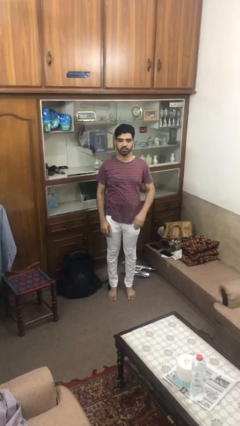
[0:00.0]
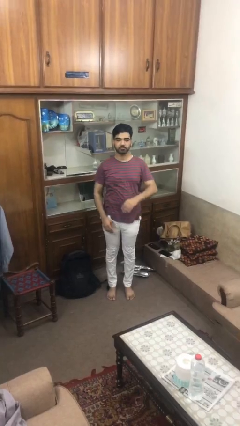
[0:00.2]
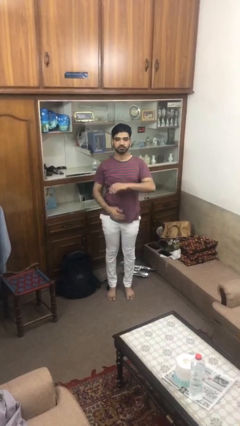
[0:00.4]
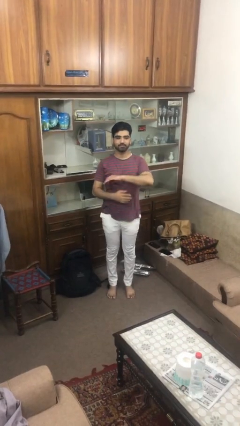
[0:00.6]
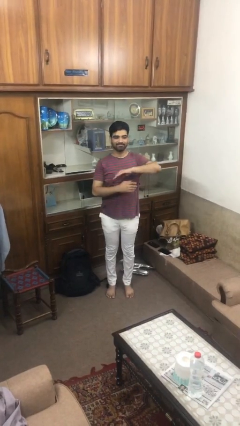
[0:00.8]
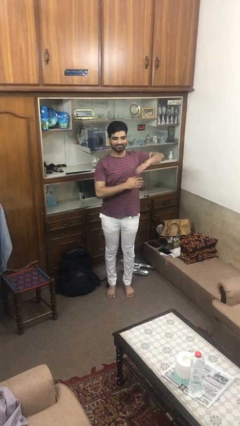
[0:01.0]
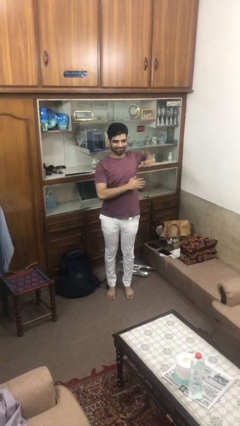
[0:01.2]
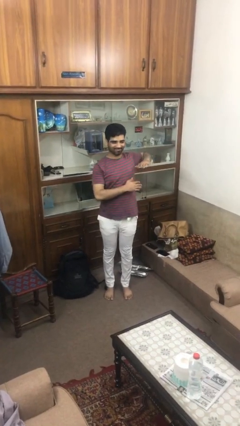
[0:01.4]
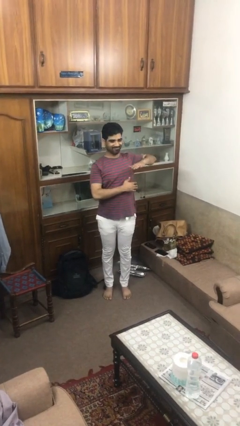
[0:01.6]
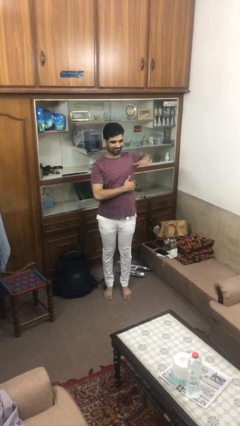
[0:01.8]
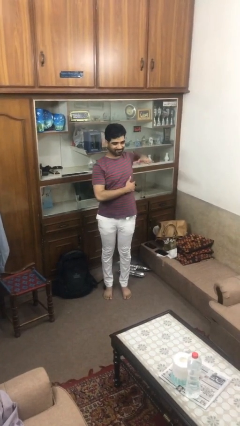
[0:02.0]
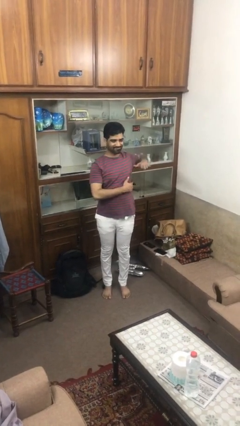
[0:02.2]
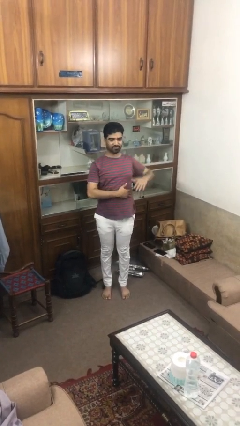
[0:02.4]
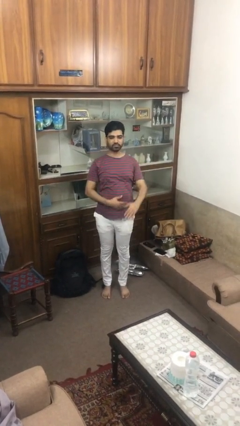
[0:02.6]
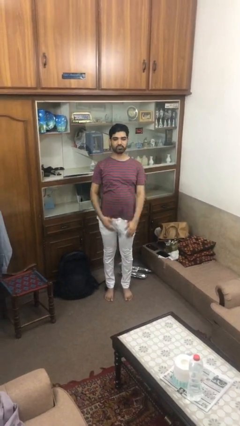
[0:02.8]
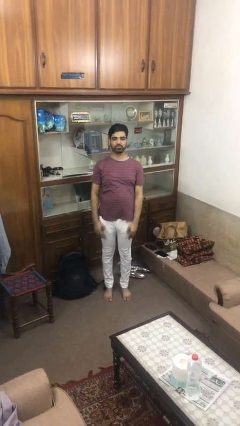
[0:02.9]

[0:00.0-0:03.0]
person stretches arms to side

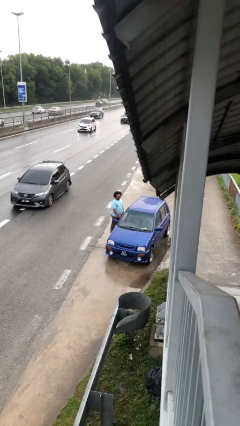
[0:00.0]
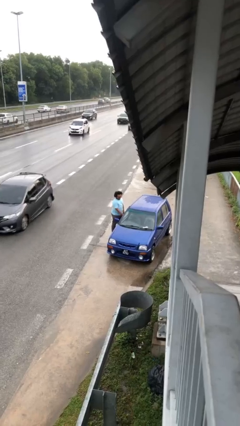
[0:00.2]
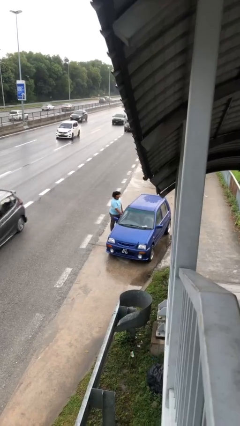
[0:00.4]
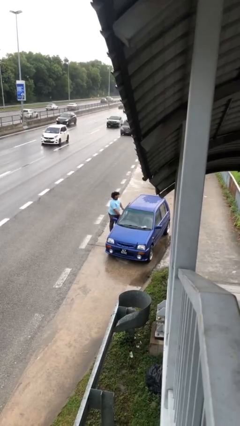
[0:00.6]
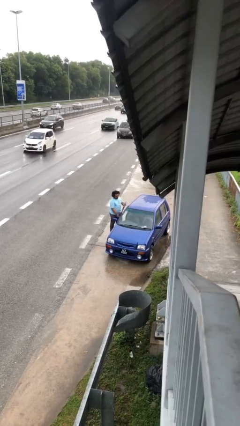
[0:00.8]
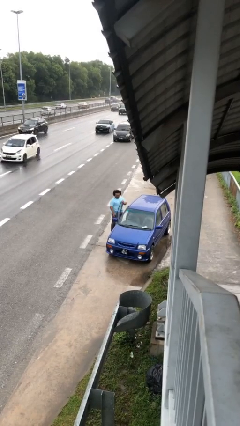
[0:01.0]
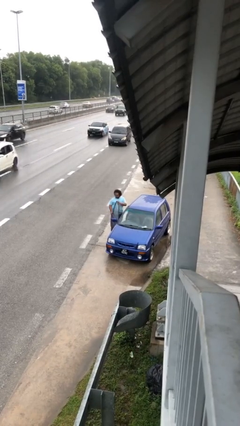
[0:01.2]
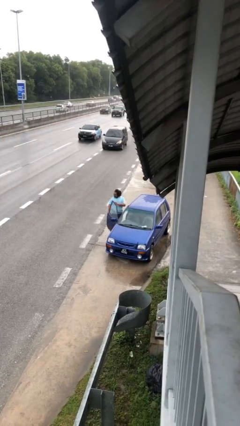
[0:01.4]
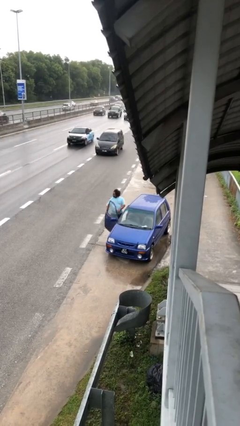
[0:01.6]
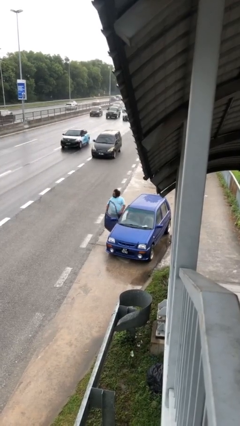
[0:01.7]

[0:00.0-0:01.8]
person opens car door

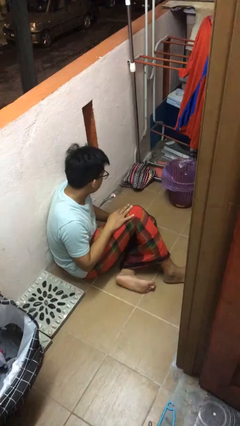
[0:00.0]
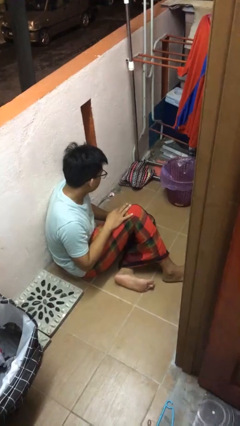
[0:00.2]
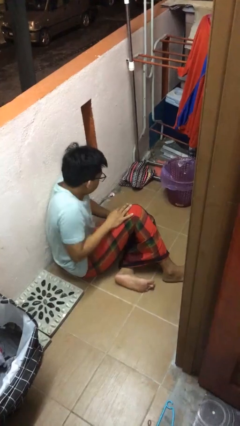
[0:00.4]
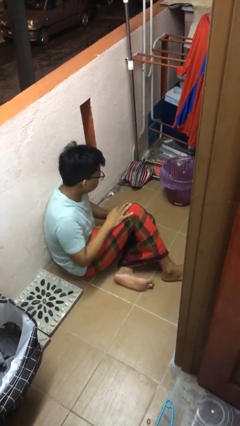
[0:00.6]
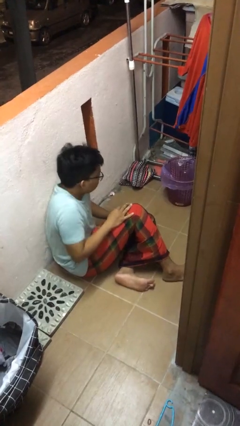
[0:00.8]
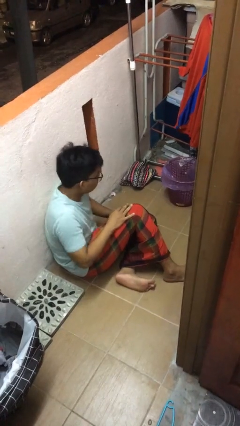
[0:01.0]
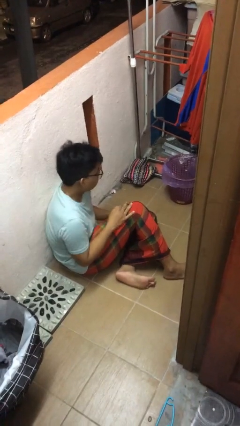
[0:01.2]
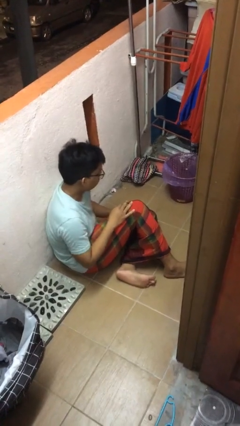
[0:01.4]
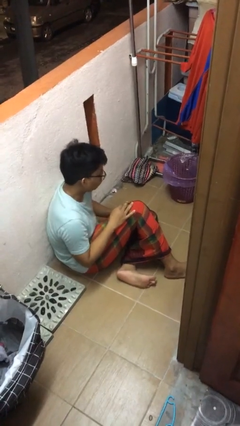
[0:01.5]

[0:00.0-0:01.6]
person shrugs

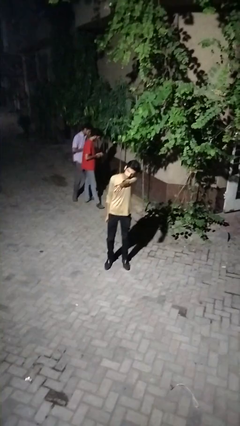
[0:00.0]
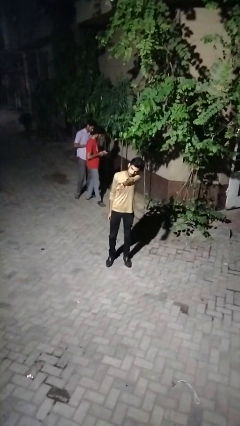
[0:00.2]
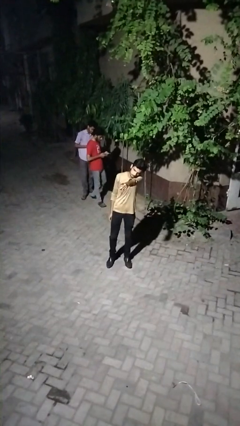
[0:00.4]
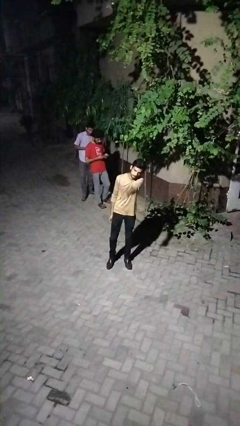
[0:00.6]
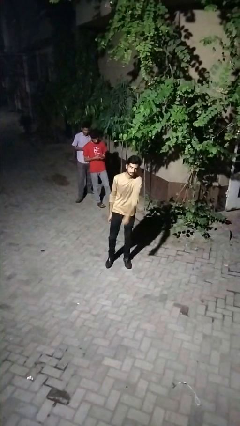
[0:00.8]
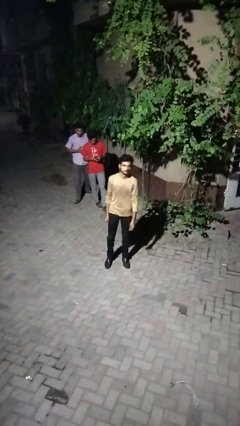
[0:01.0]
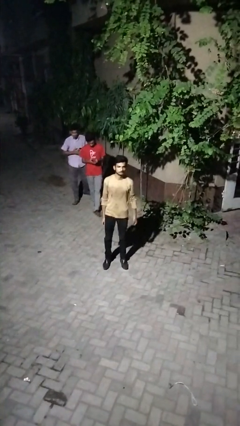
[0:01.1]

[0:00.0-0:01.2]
person points at person

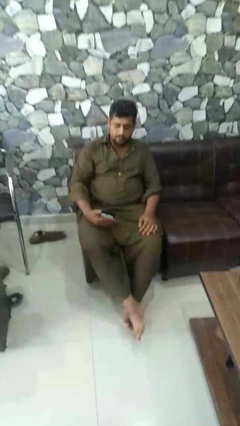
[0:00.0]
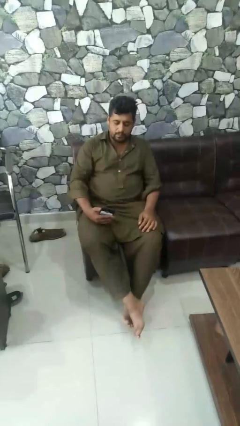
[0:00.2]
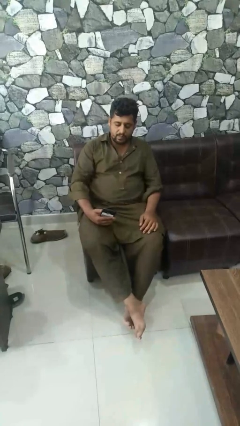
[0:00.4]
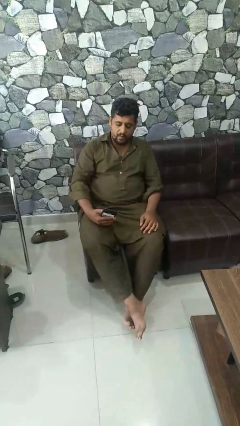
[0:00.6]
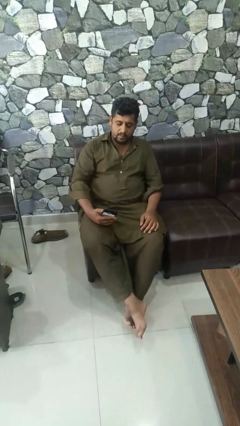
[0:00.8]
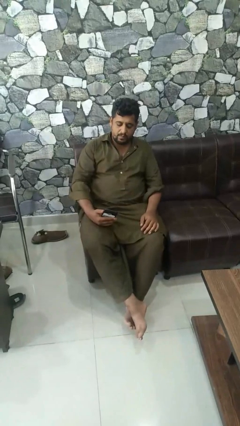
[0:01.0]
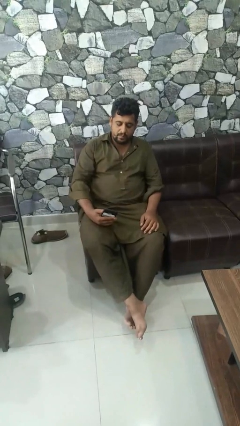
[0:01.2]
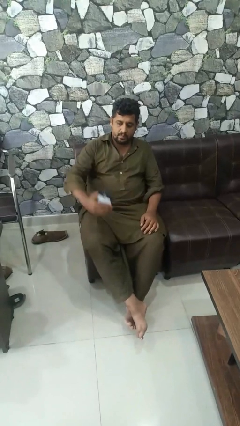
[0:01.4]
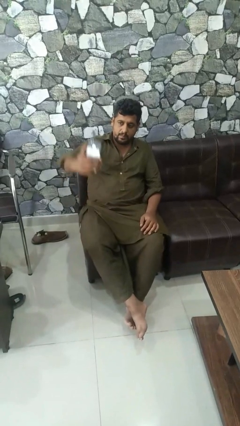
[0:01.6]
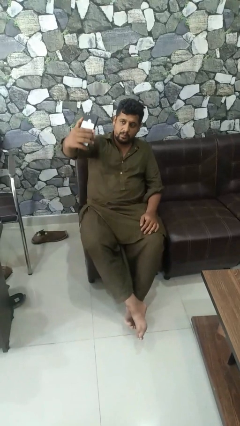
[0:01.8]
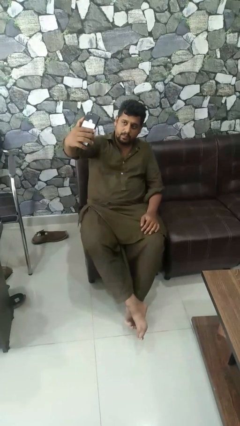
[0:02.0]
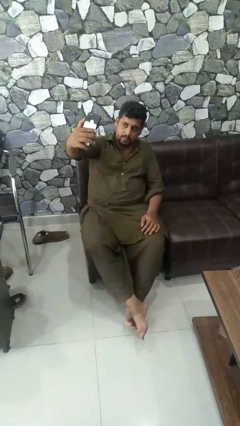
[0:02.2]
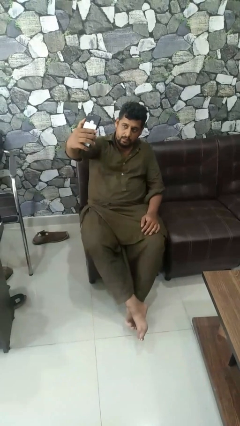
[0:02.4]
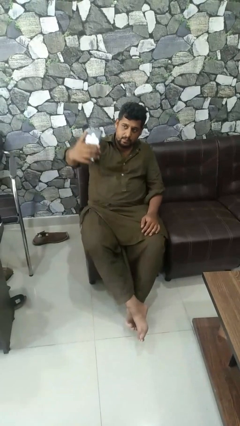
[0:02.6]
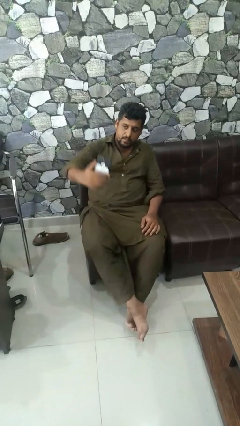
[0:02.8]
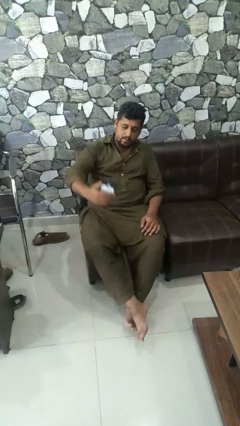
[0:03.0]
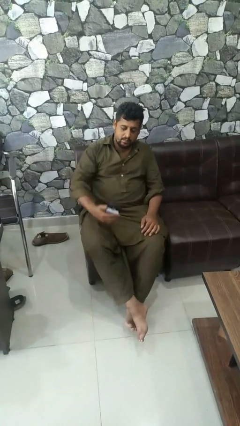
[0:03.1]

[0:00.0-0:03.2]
person takes selfie

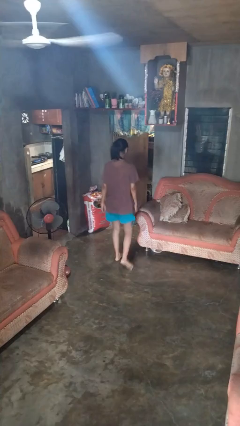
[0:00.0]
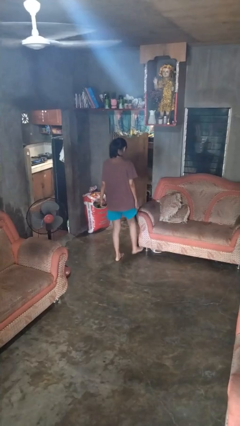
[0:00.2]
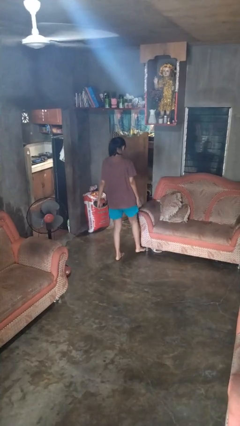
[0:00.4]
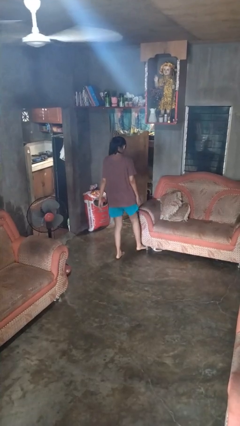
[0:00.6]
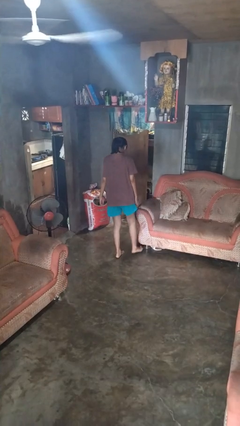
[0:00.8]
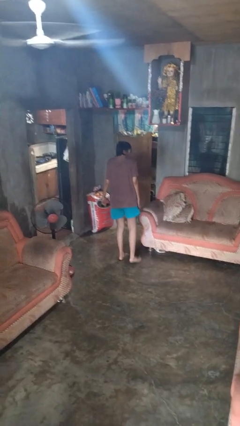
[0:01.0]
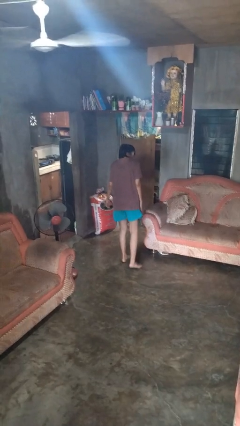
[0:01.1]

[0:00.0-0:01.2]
person stubs toe

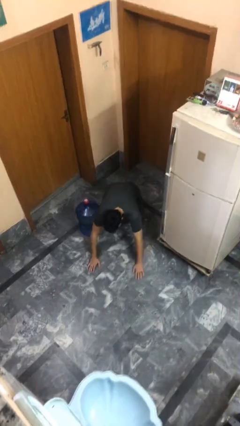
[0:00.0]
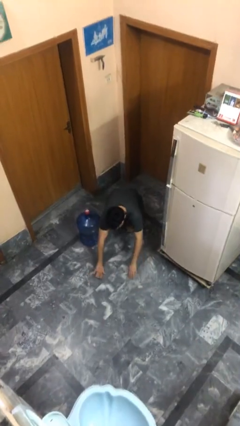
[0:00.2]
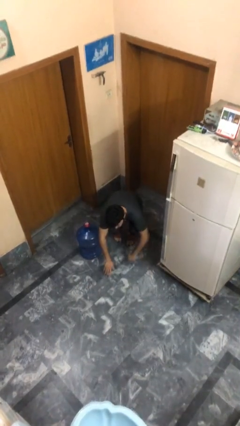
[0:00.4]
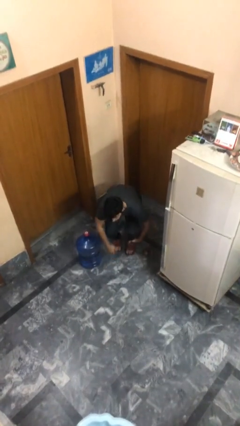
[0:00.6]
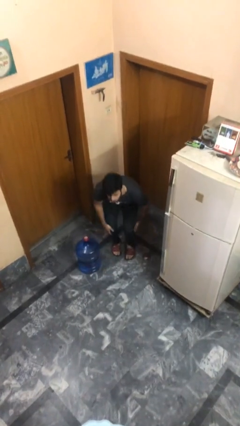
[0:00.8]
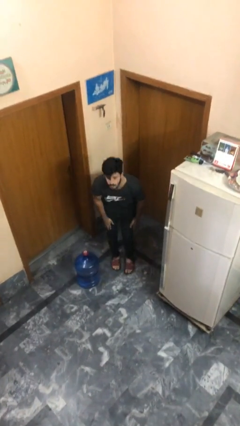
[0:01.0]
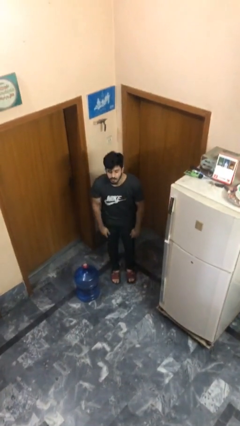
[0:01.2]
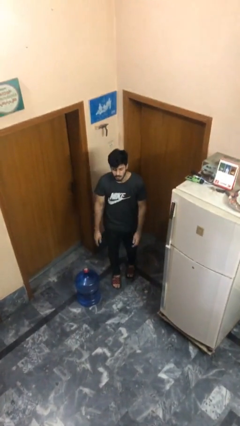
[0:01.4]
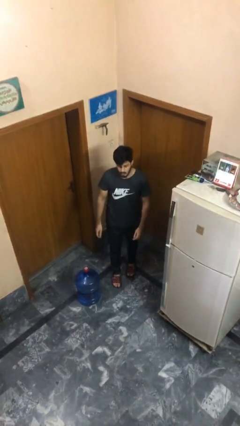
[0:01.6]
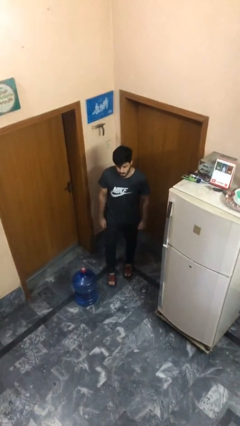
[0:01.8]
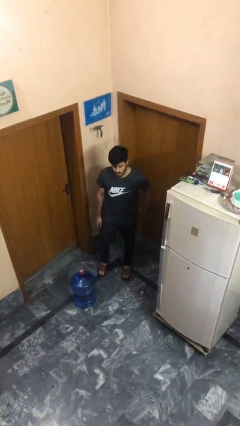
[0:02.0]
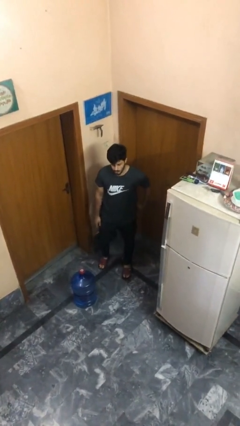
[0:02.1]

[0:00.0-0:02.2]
person stands up from floor

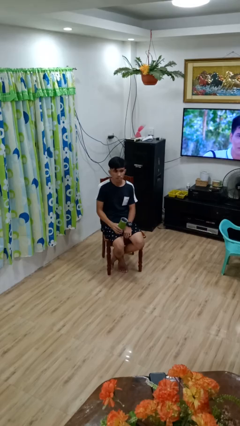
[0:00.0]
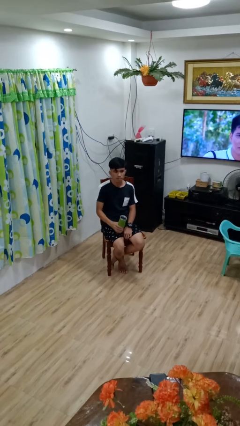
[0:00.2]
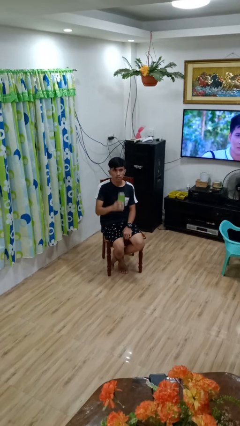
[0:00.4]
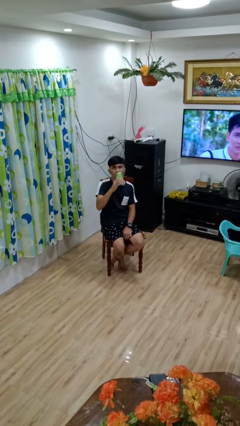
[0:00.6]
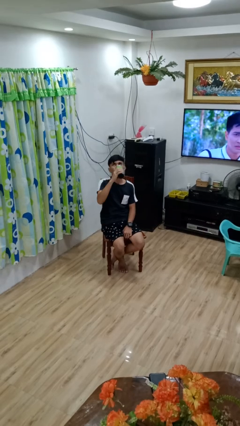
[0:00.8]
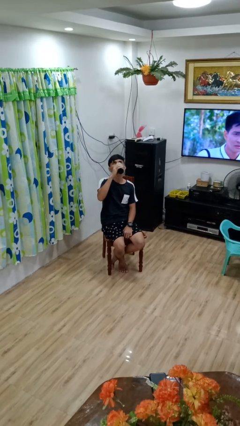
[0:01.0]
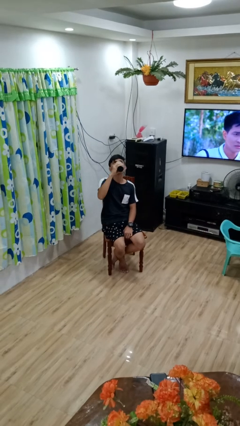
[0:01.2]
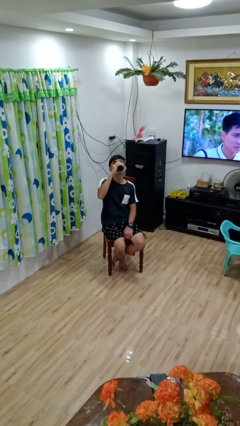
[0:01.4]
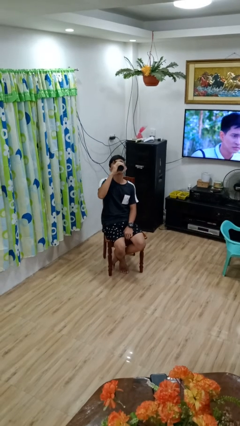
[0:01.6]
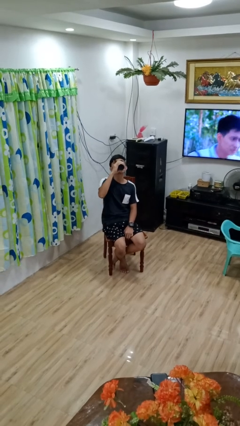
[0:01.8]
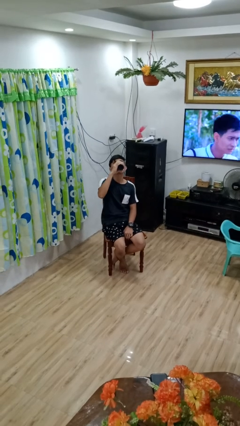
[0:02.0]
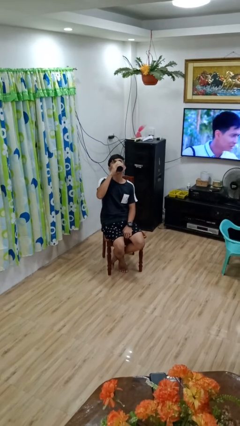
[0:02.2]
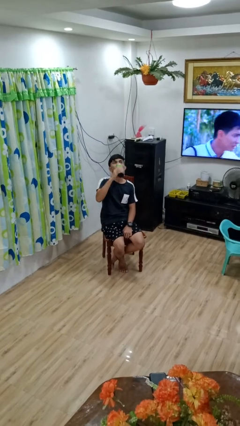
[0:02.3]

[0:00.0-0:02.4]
person drinks from bottle

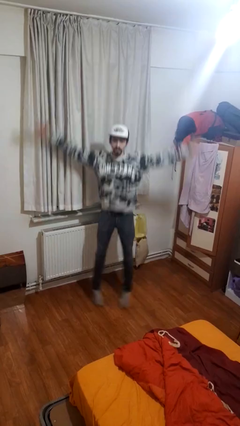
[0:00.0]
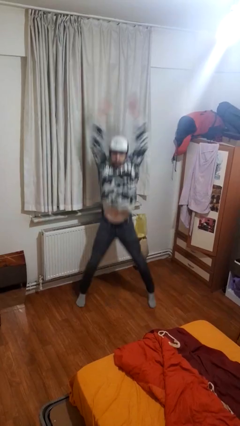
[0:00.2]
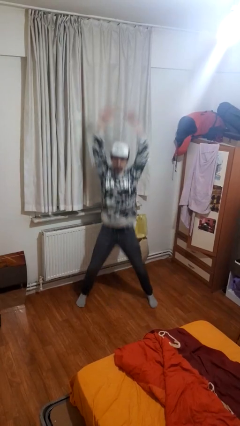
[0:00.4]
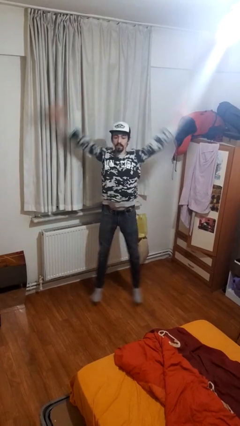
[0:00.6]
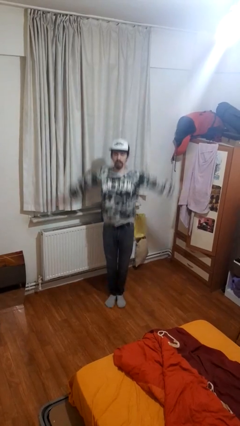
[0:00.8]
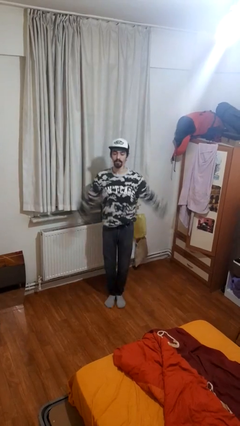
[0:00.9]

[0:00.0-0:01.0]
person exercises with jumping jacks
